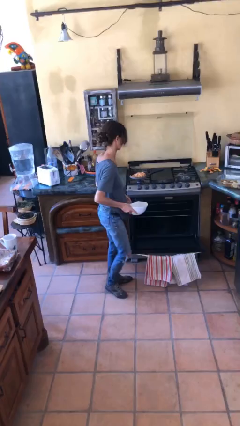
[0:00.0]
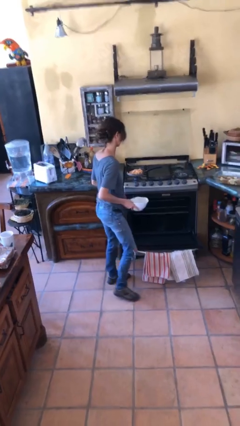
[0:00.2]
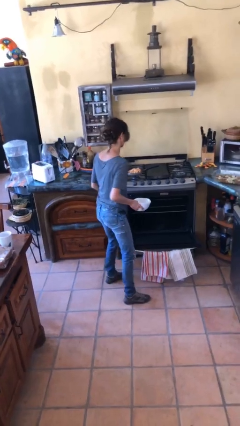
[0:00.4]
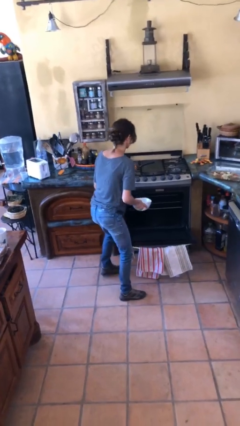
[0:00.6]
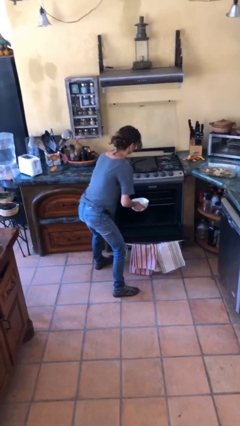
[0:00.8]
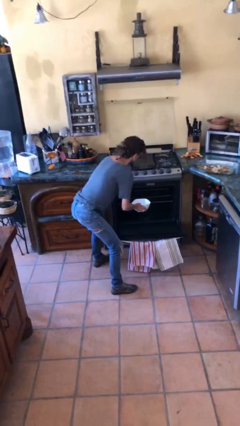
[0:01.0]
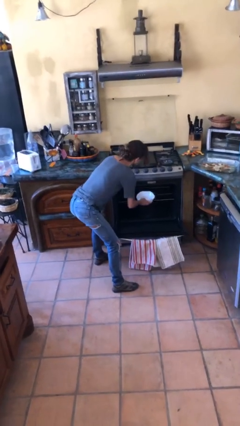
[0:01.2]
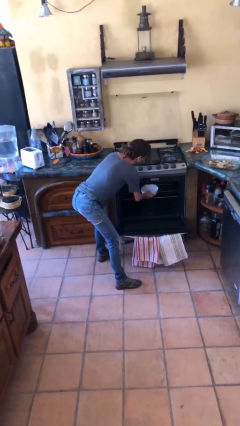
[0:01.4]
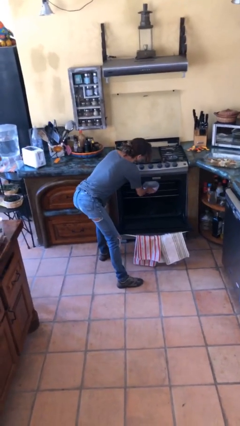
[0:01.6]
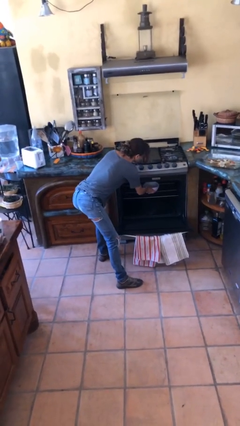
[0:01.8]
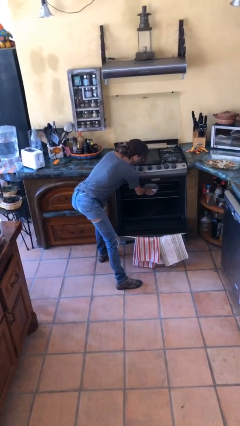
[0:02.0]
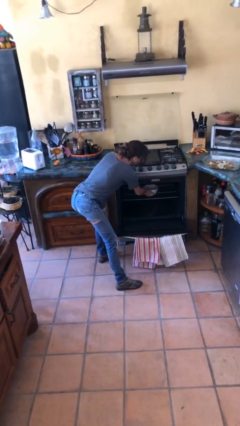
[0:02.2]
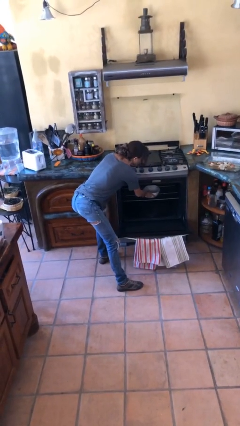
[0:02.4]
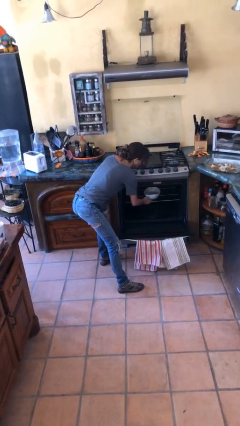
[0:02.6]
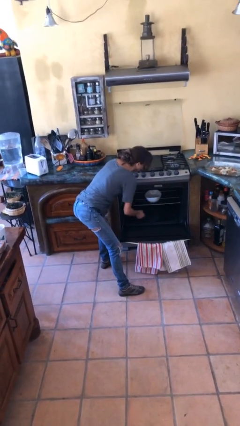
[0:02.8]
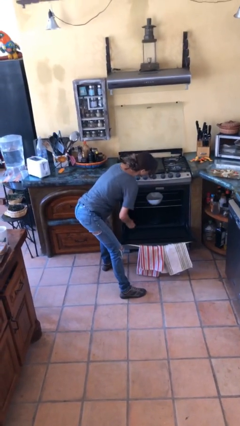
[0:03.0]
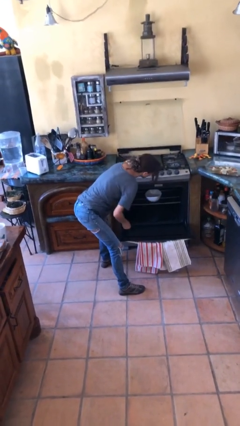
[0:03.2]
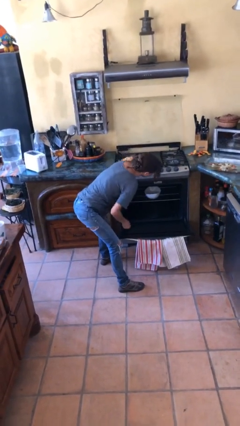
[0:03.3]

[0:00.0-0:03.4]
person puts object into oven

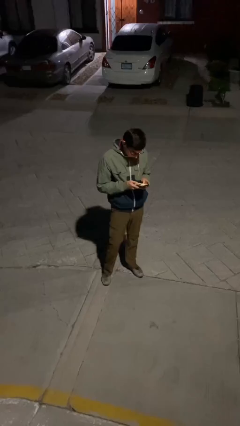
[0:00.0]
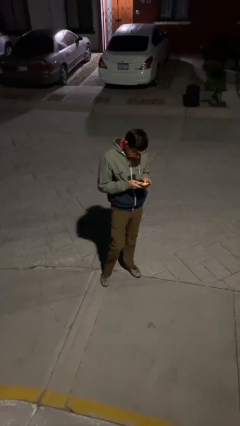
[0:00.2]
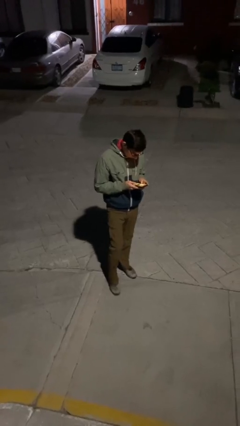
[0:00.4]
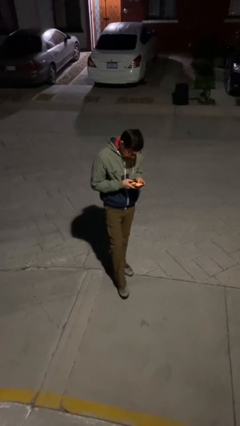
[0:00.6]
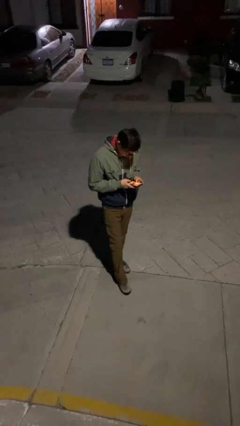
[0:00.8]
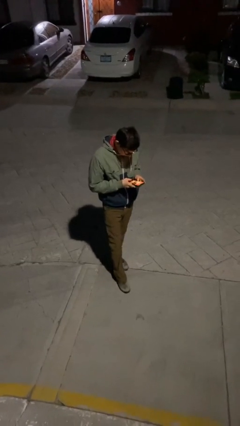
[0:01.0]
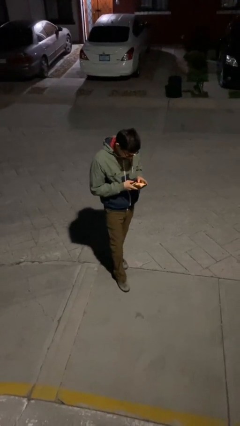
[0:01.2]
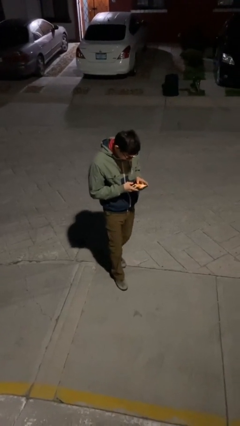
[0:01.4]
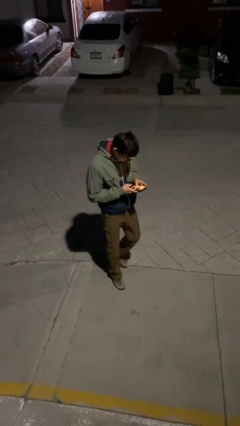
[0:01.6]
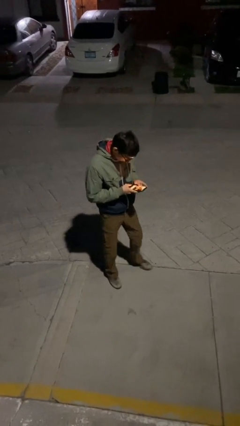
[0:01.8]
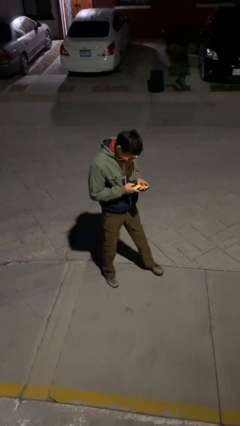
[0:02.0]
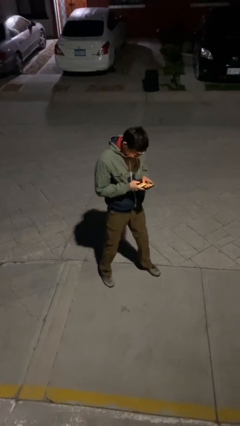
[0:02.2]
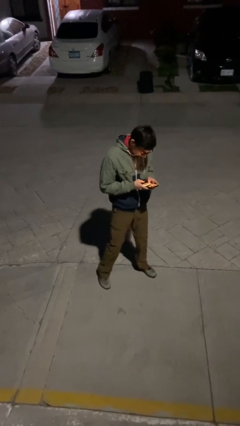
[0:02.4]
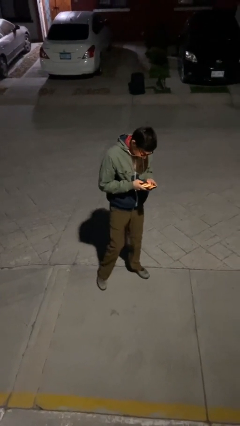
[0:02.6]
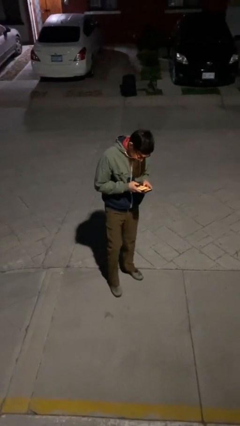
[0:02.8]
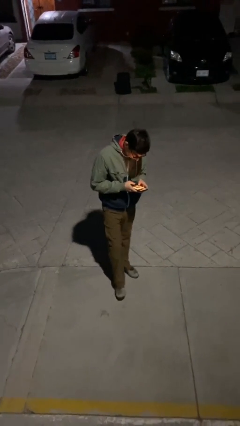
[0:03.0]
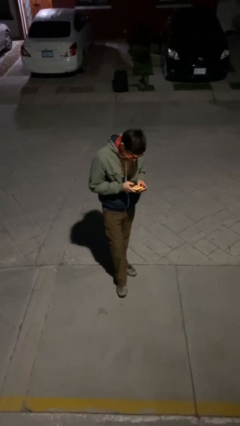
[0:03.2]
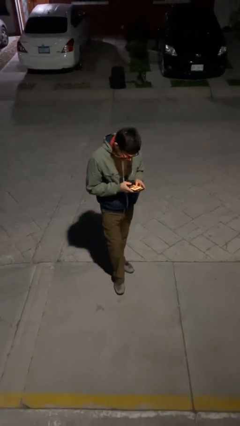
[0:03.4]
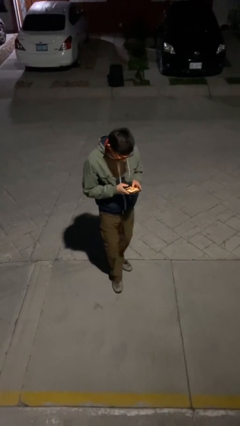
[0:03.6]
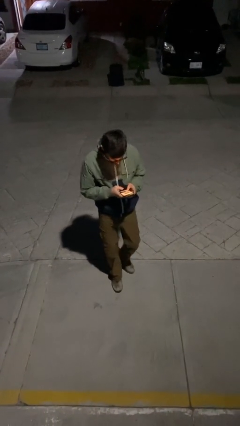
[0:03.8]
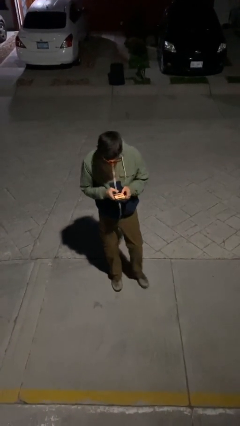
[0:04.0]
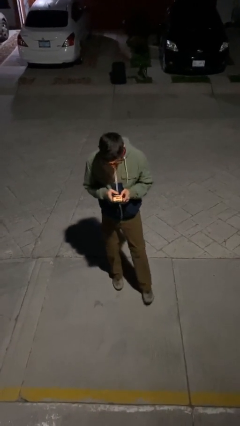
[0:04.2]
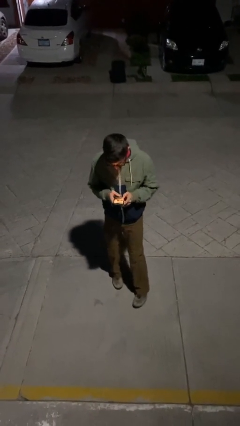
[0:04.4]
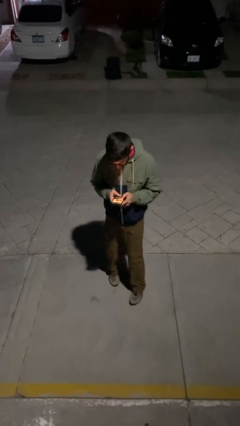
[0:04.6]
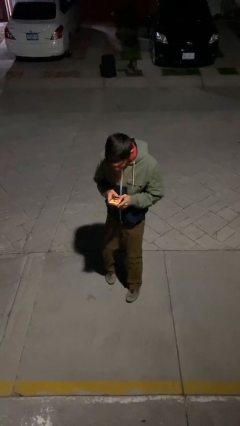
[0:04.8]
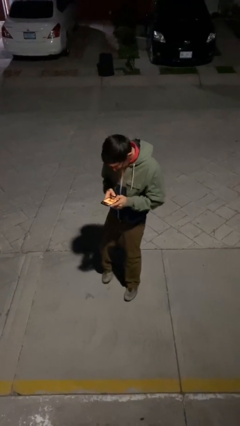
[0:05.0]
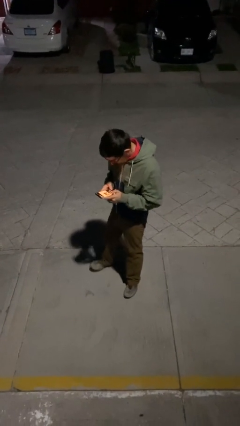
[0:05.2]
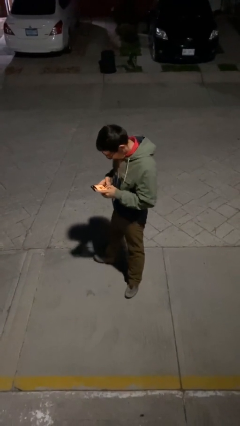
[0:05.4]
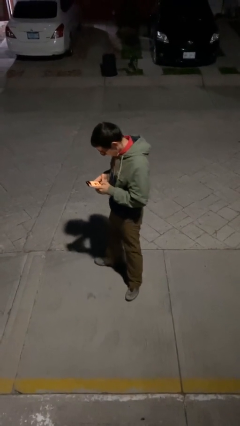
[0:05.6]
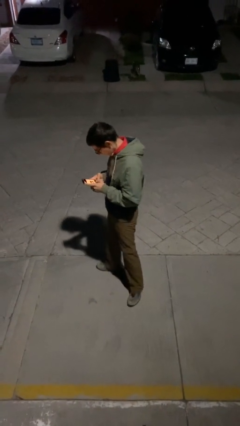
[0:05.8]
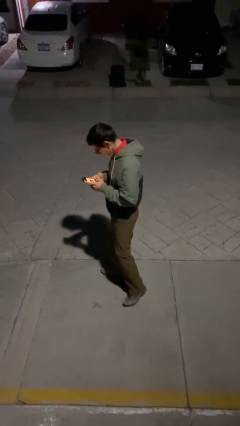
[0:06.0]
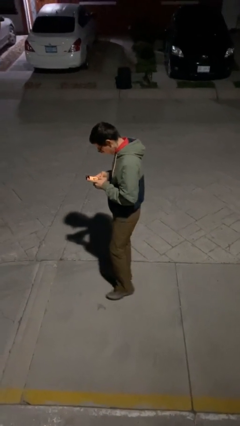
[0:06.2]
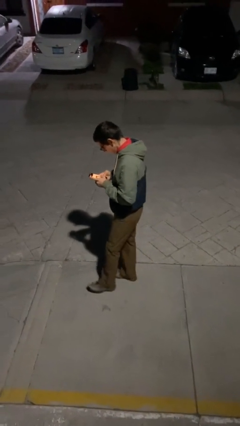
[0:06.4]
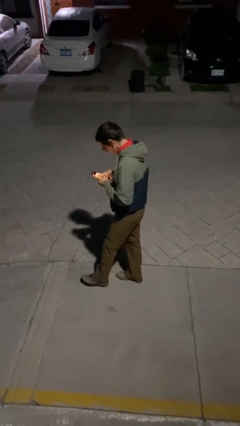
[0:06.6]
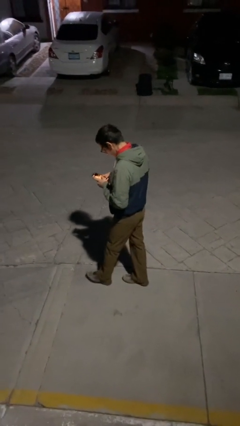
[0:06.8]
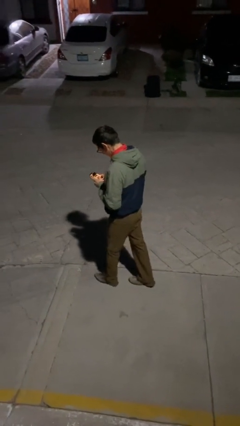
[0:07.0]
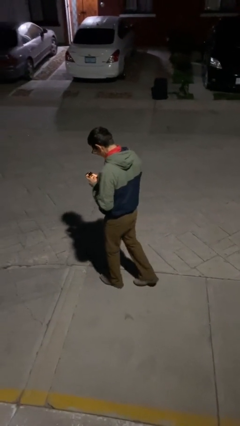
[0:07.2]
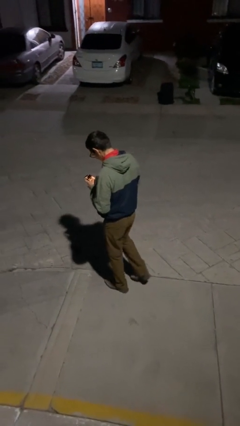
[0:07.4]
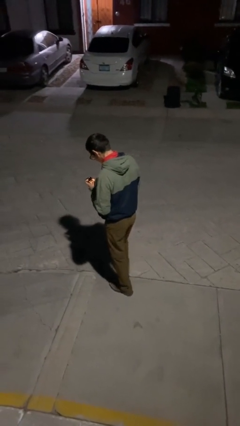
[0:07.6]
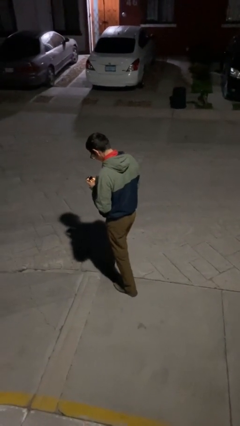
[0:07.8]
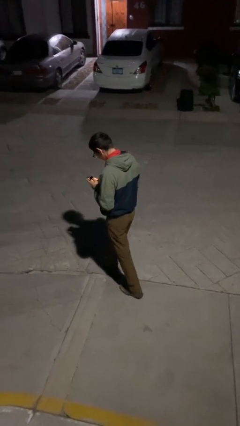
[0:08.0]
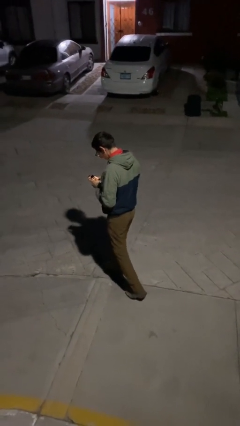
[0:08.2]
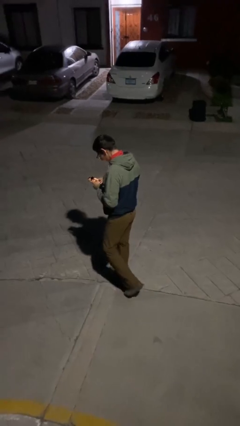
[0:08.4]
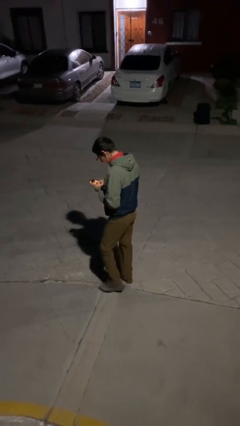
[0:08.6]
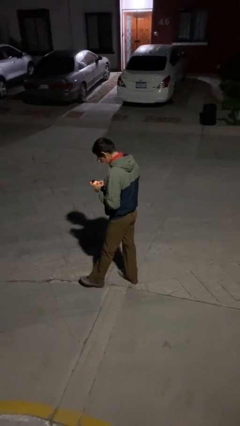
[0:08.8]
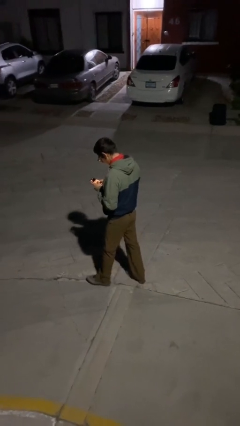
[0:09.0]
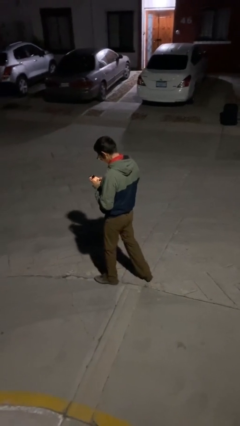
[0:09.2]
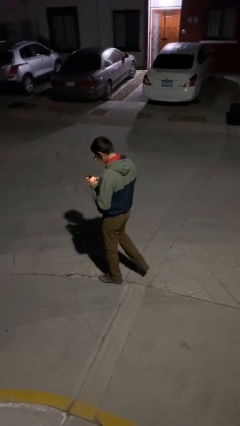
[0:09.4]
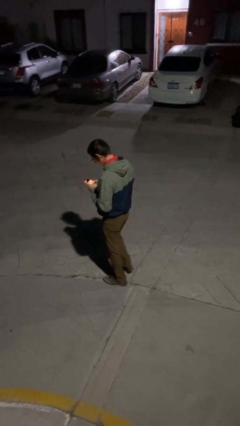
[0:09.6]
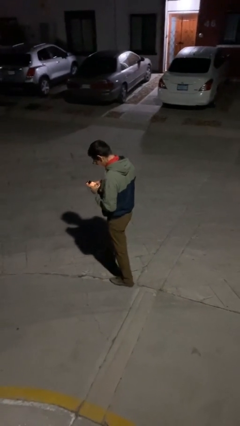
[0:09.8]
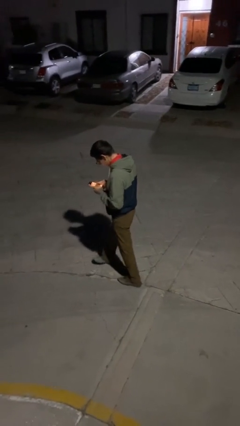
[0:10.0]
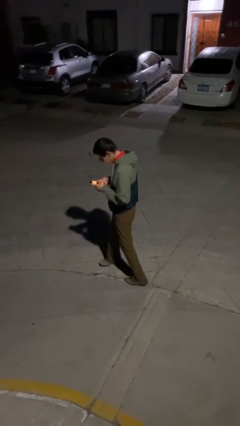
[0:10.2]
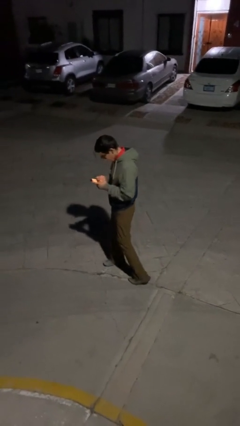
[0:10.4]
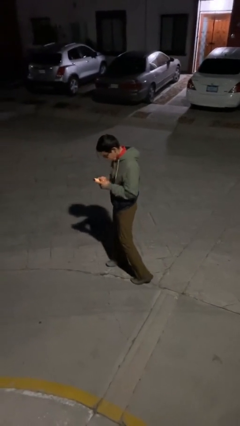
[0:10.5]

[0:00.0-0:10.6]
person texts on phone

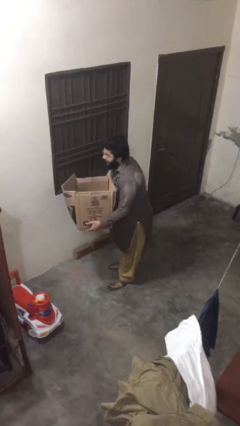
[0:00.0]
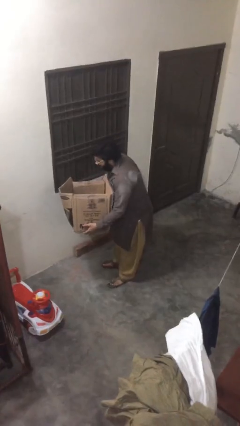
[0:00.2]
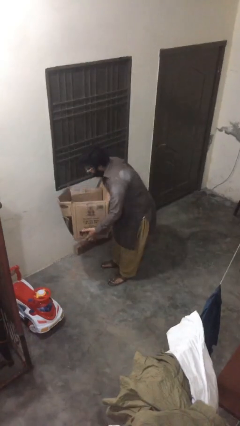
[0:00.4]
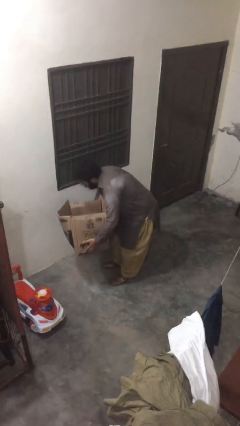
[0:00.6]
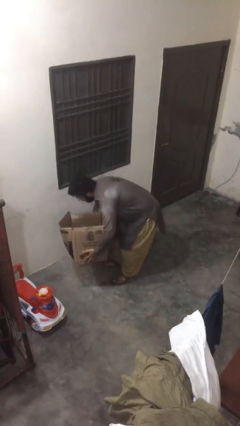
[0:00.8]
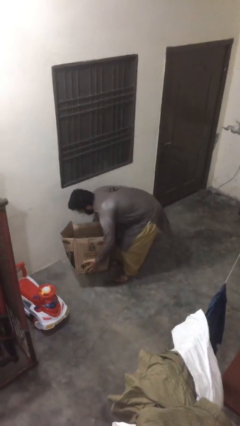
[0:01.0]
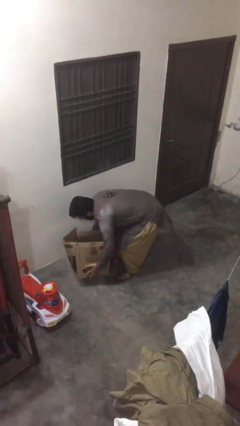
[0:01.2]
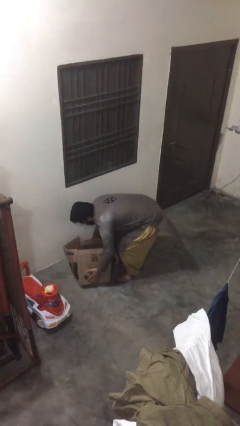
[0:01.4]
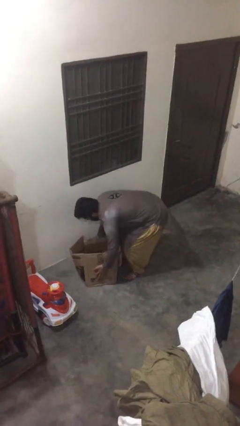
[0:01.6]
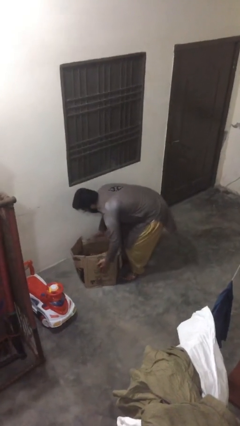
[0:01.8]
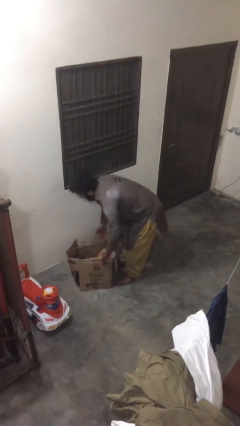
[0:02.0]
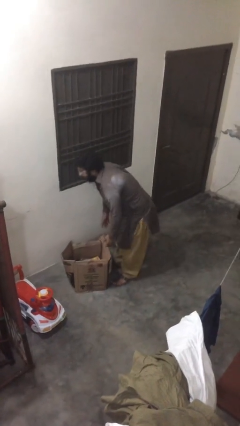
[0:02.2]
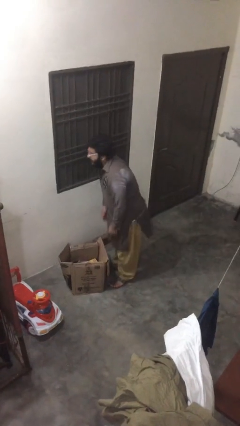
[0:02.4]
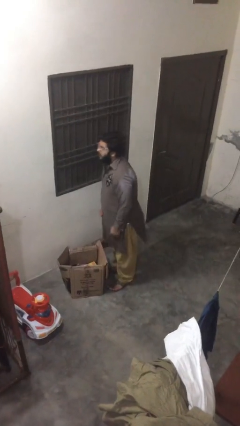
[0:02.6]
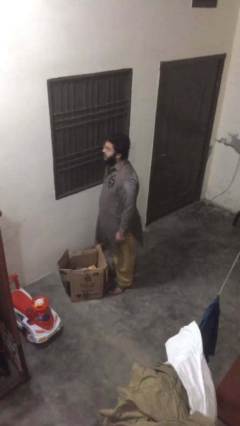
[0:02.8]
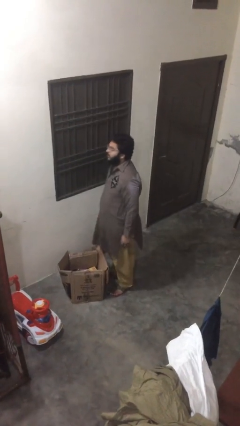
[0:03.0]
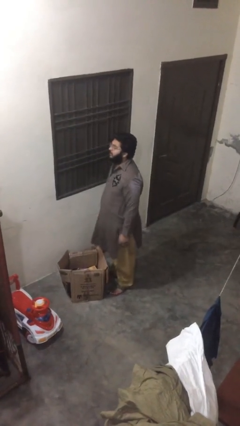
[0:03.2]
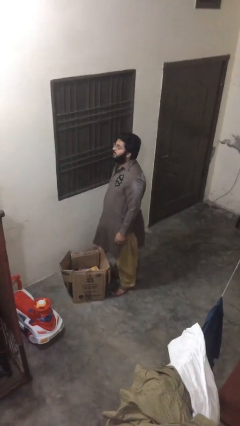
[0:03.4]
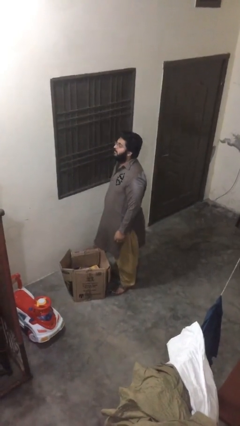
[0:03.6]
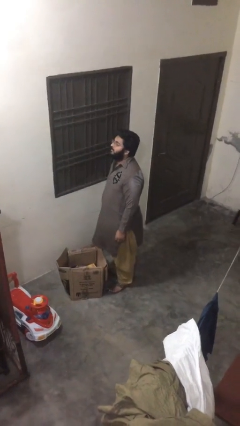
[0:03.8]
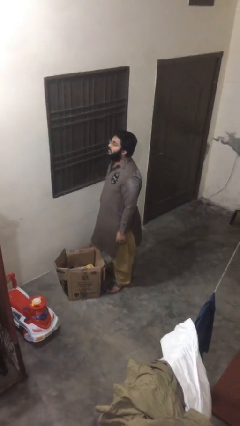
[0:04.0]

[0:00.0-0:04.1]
person puts down object on floor
